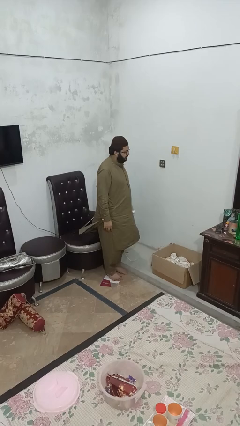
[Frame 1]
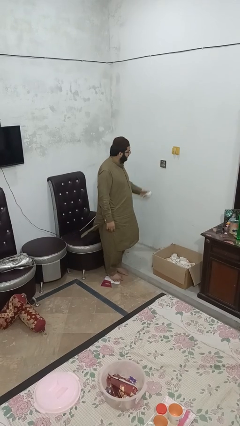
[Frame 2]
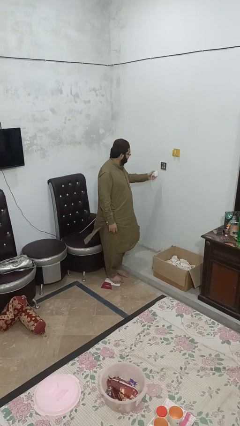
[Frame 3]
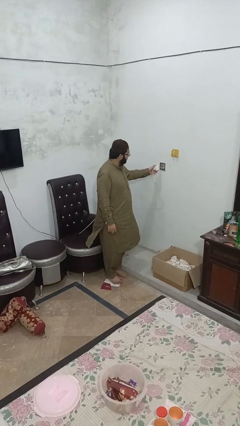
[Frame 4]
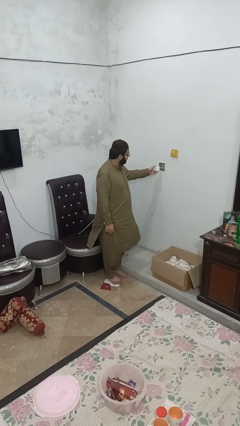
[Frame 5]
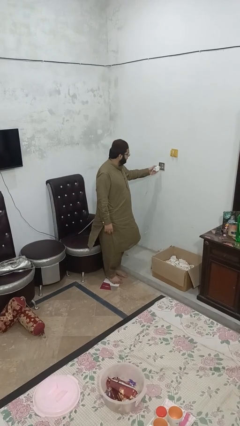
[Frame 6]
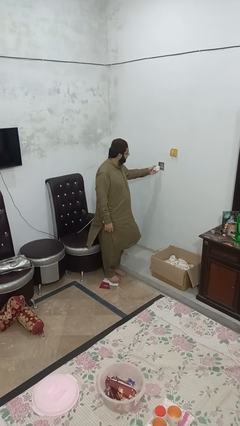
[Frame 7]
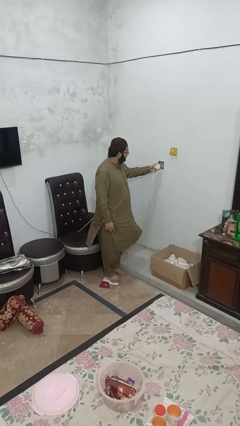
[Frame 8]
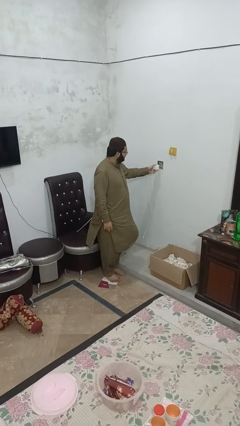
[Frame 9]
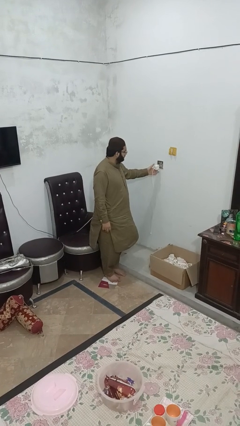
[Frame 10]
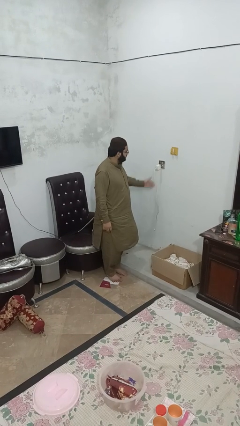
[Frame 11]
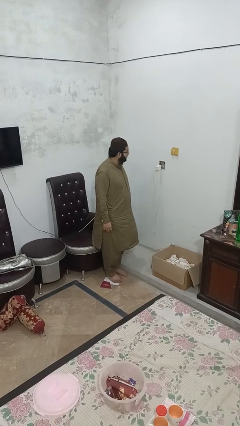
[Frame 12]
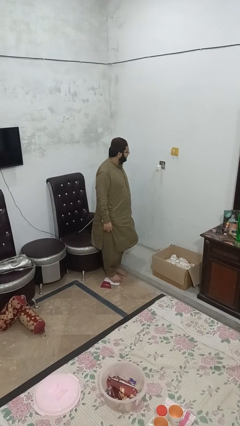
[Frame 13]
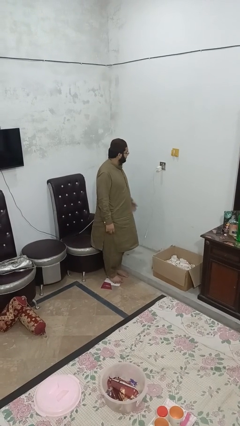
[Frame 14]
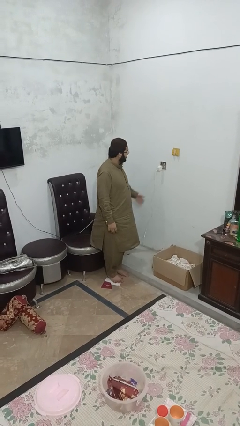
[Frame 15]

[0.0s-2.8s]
person plugs into electrical socket

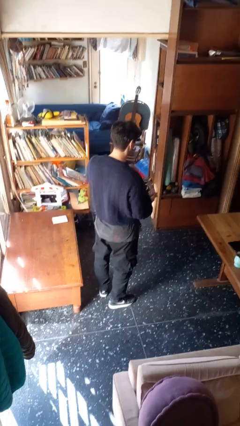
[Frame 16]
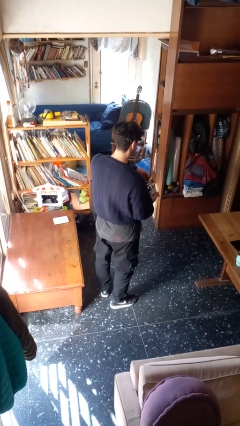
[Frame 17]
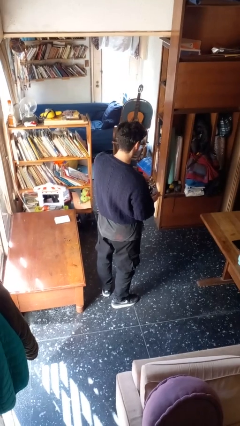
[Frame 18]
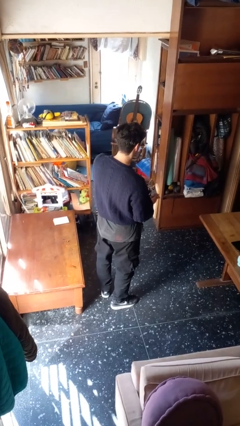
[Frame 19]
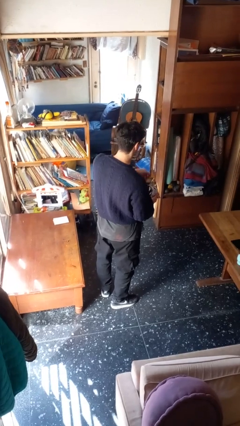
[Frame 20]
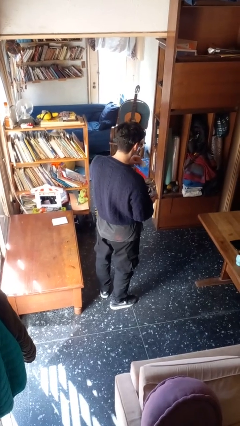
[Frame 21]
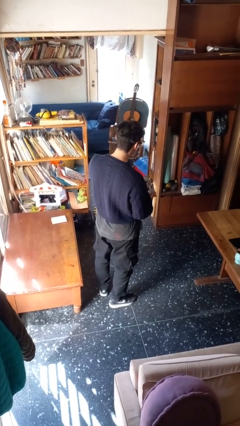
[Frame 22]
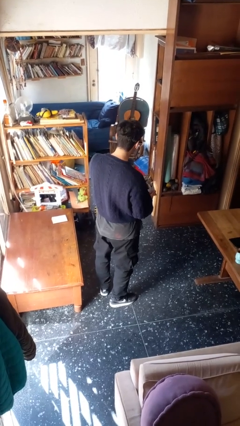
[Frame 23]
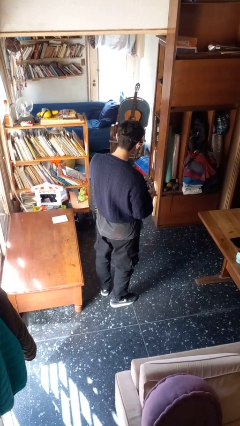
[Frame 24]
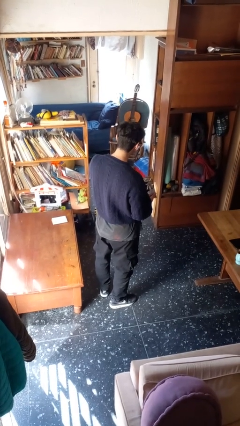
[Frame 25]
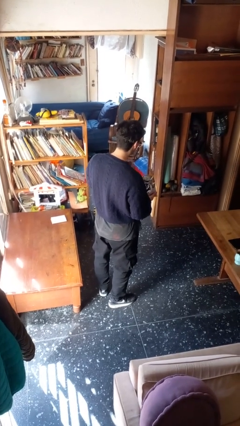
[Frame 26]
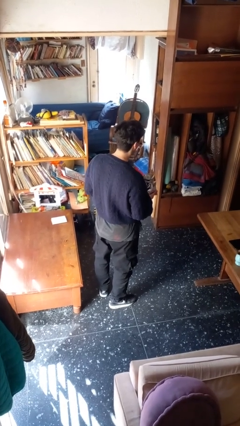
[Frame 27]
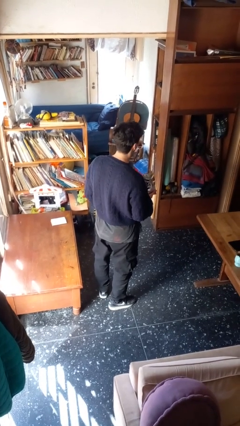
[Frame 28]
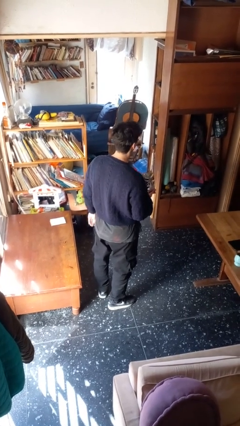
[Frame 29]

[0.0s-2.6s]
person eats snack from bag

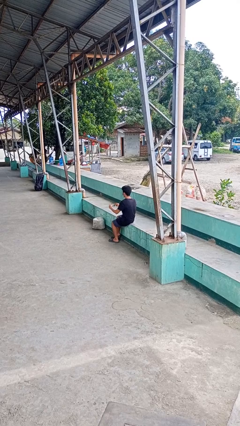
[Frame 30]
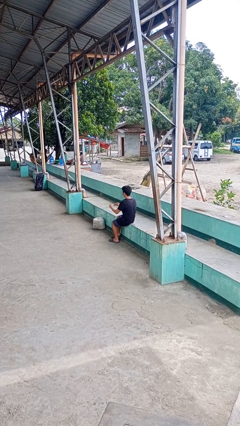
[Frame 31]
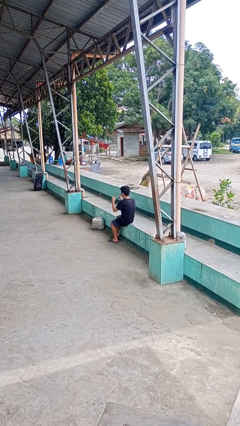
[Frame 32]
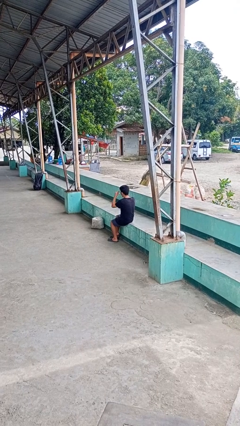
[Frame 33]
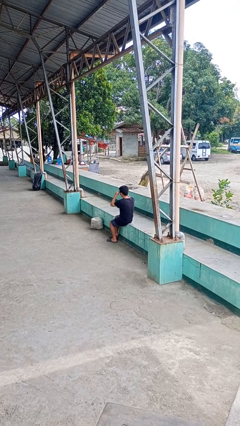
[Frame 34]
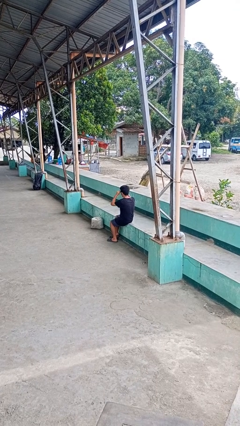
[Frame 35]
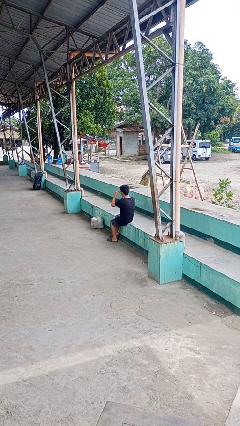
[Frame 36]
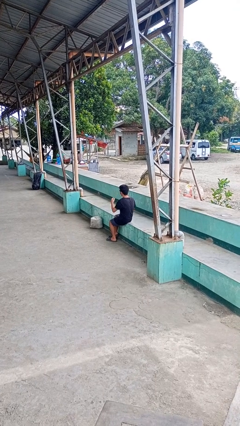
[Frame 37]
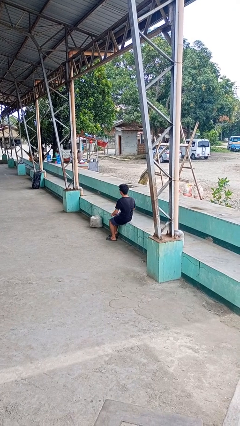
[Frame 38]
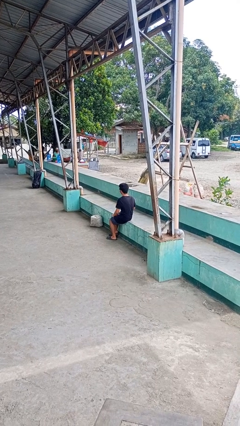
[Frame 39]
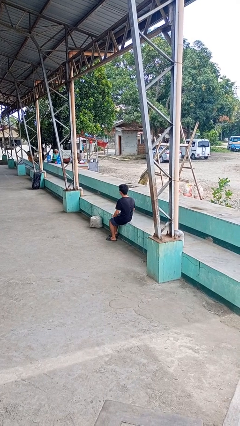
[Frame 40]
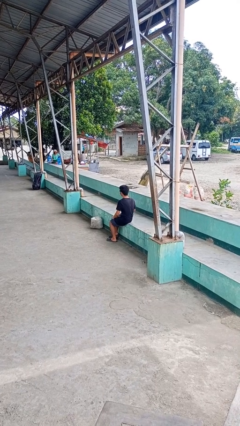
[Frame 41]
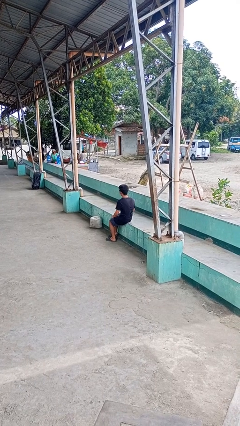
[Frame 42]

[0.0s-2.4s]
person puts on sunglasses

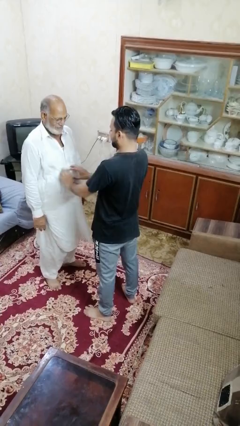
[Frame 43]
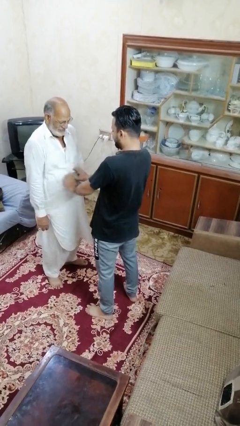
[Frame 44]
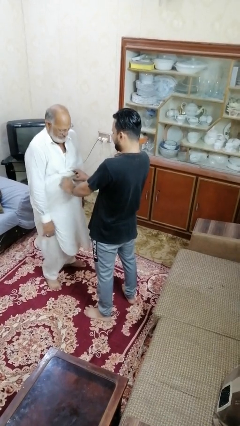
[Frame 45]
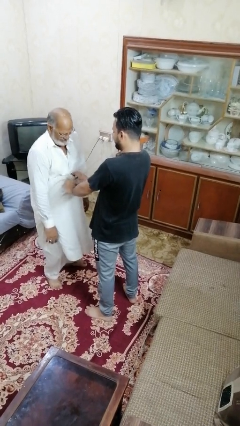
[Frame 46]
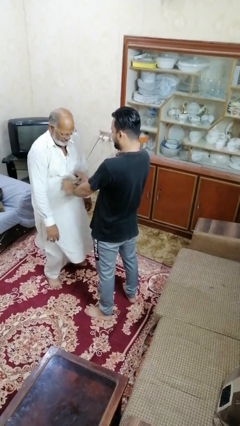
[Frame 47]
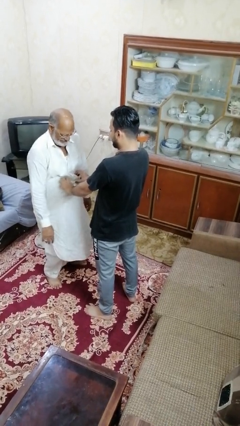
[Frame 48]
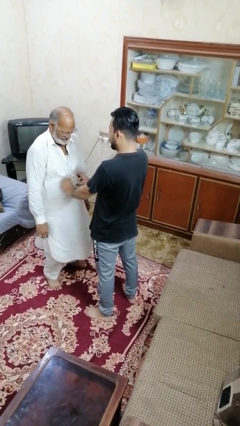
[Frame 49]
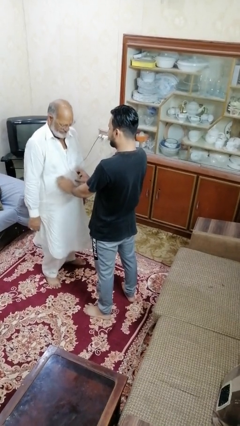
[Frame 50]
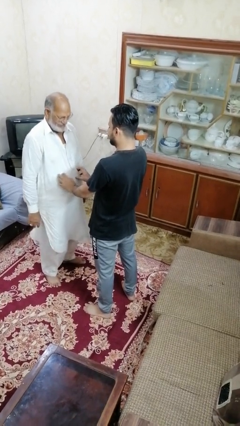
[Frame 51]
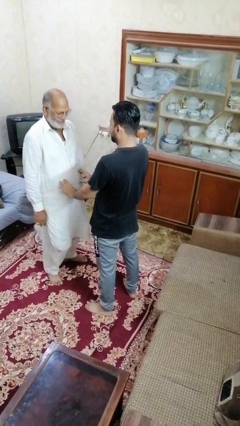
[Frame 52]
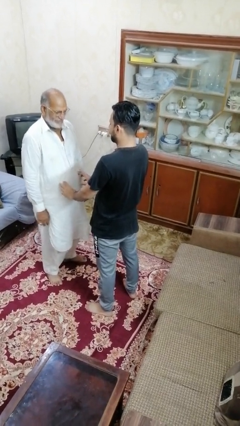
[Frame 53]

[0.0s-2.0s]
person tickles person

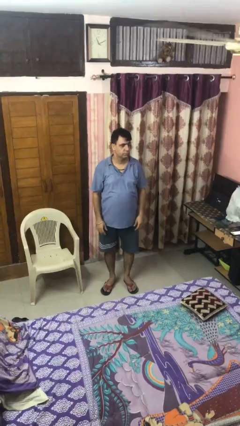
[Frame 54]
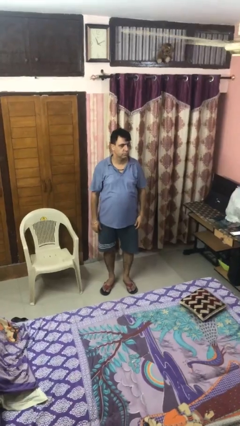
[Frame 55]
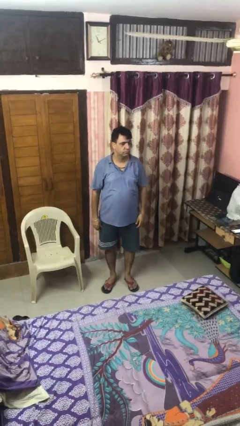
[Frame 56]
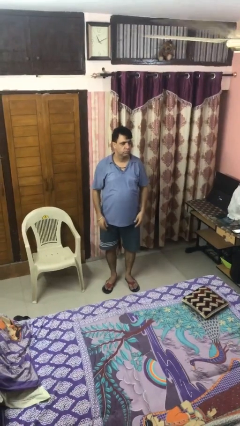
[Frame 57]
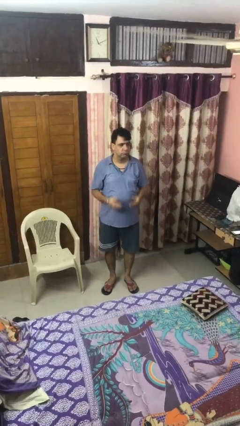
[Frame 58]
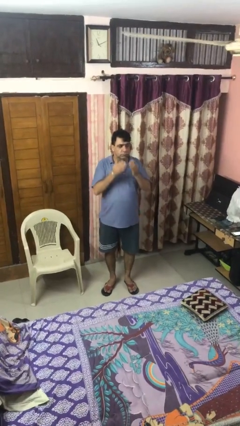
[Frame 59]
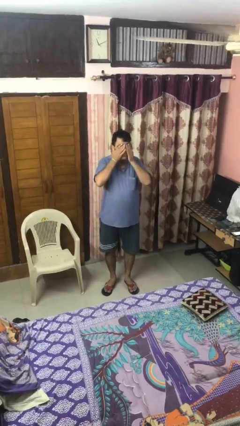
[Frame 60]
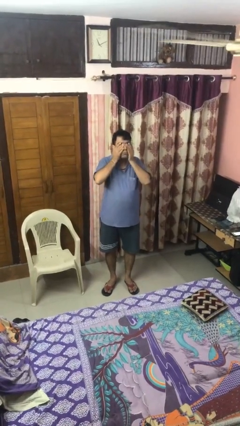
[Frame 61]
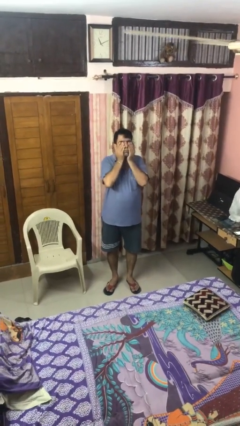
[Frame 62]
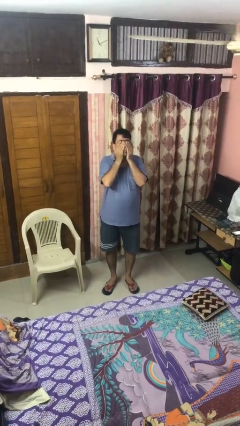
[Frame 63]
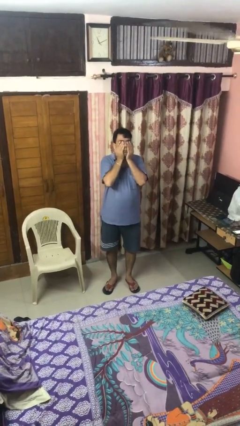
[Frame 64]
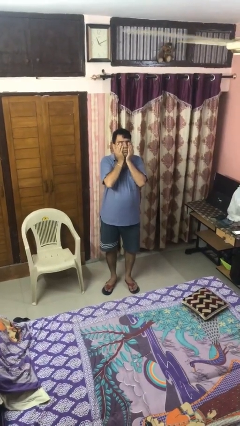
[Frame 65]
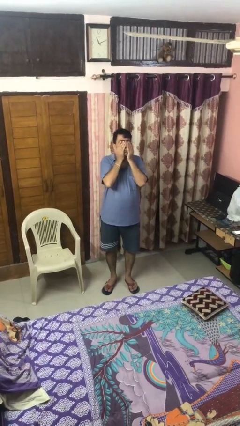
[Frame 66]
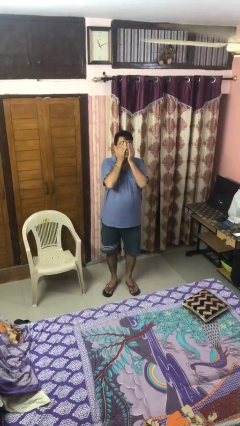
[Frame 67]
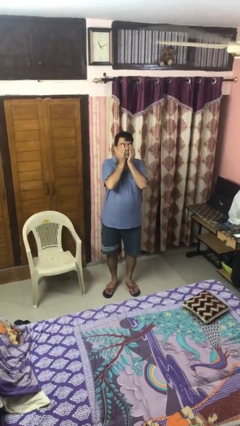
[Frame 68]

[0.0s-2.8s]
person rubs eyes

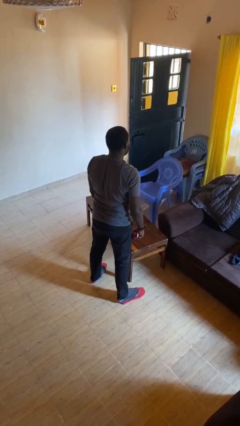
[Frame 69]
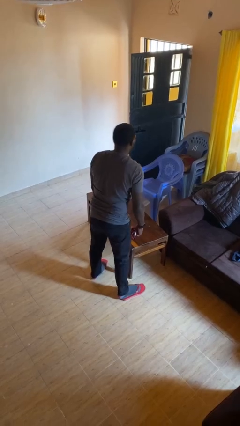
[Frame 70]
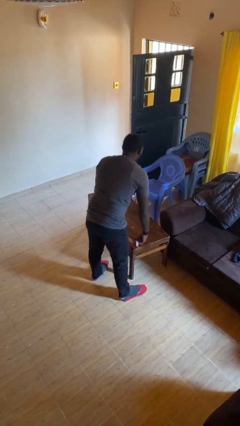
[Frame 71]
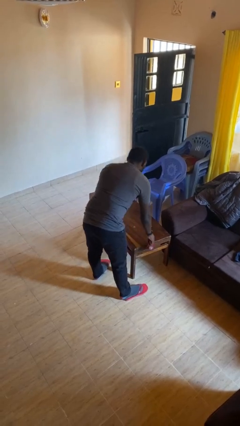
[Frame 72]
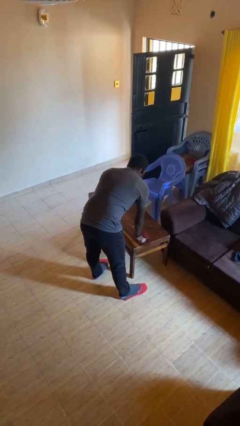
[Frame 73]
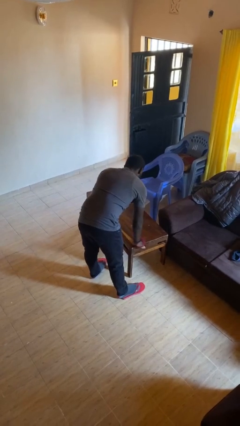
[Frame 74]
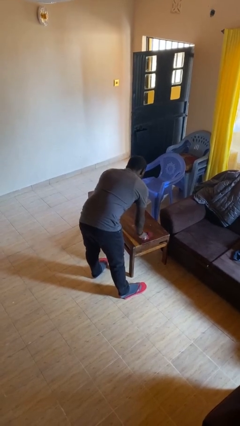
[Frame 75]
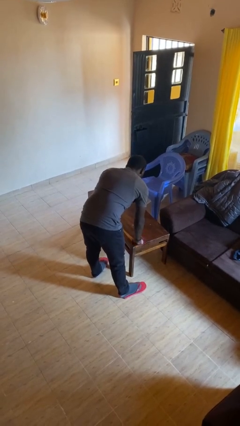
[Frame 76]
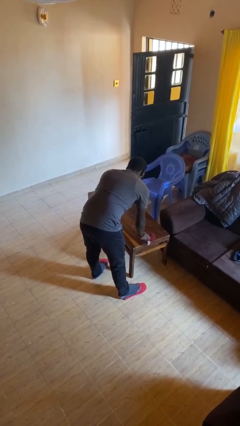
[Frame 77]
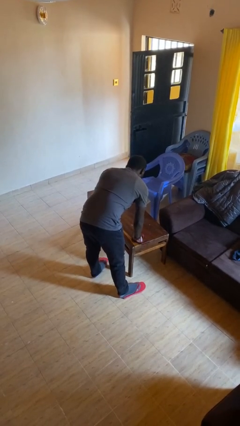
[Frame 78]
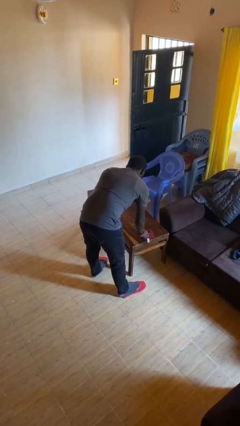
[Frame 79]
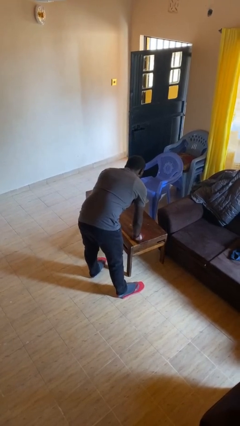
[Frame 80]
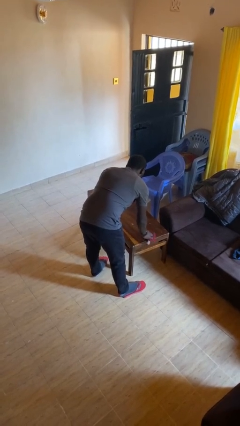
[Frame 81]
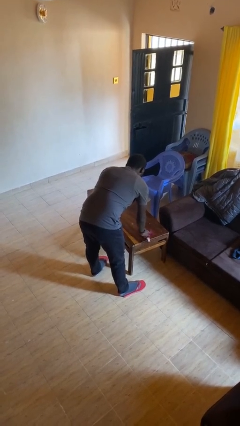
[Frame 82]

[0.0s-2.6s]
person cleans table with rag

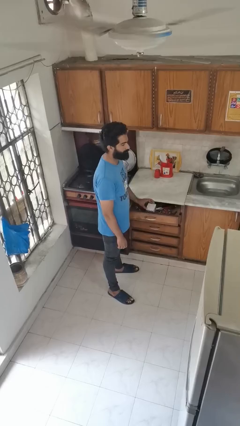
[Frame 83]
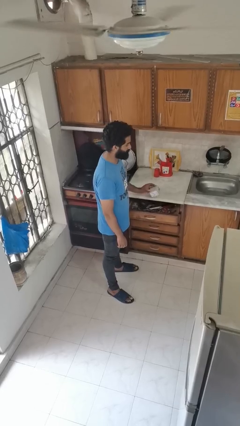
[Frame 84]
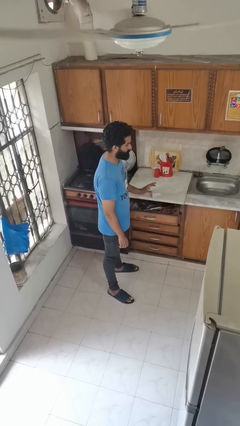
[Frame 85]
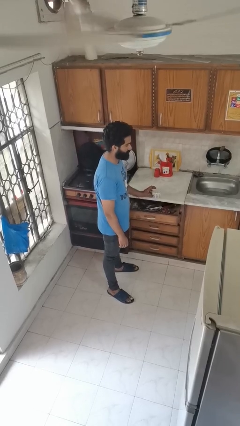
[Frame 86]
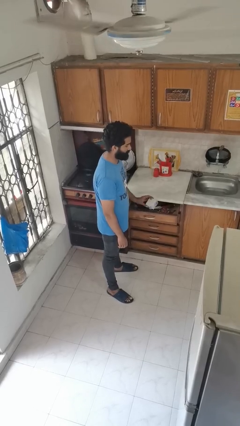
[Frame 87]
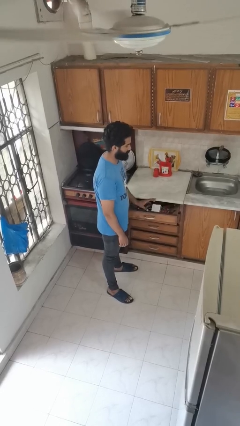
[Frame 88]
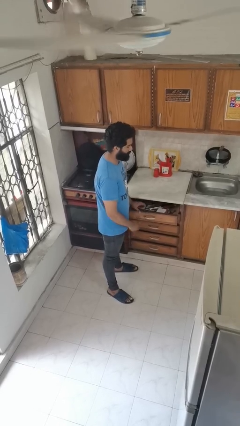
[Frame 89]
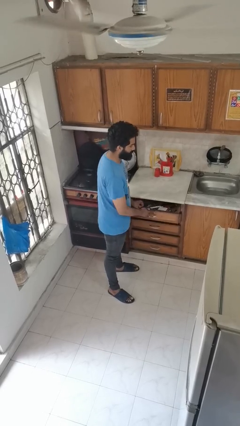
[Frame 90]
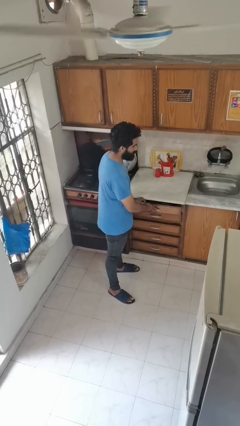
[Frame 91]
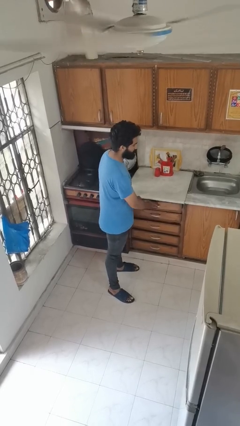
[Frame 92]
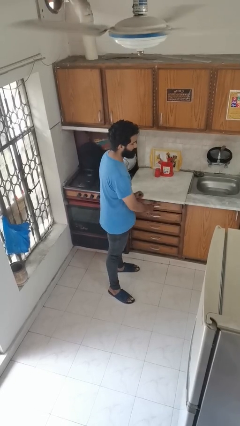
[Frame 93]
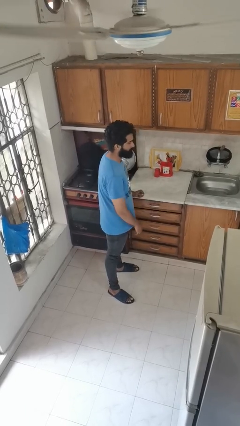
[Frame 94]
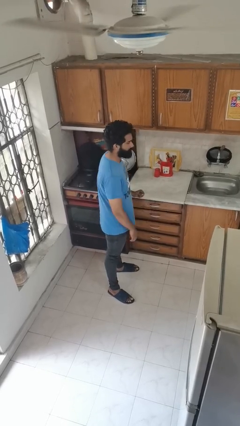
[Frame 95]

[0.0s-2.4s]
person puts object into kitchen drawer
